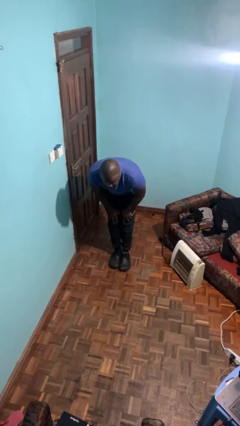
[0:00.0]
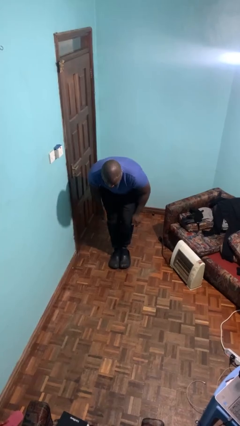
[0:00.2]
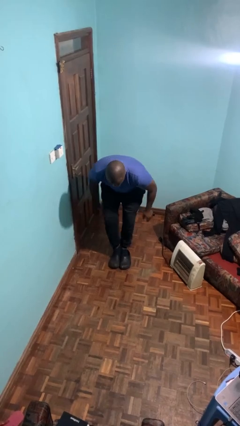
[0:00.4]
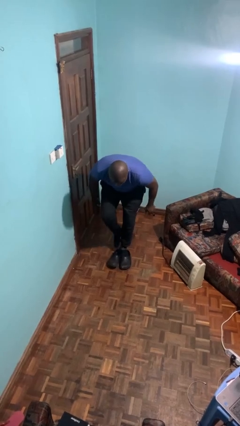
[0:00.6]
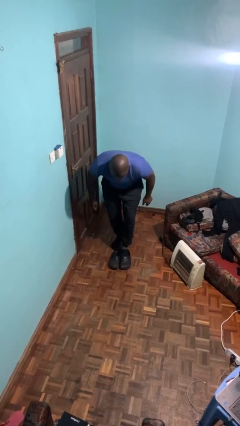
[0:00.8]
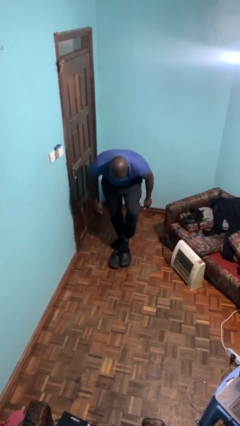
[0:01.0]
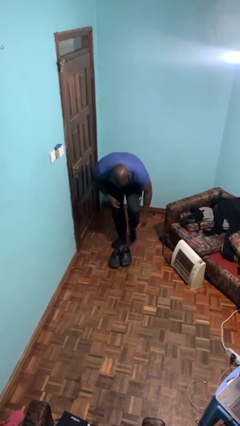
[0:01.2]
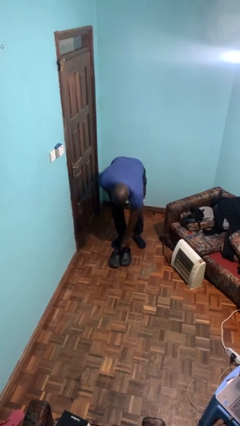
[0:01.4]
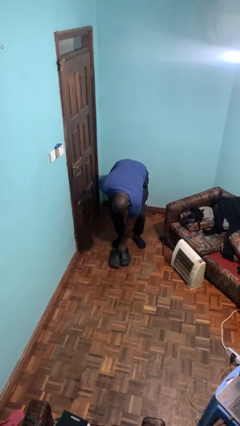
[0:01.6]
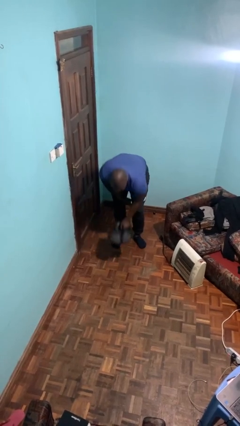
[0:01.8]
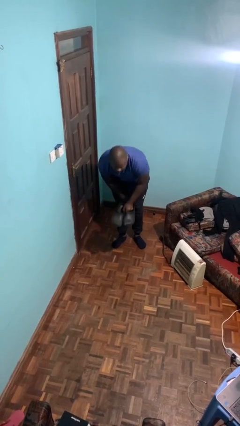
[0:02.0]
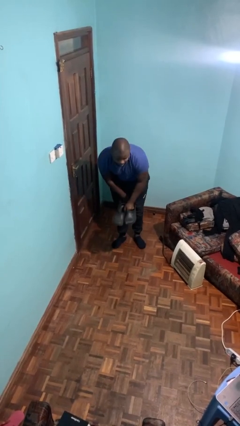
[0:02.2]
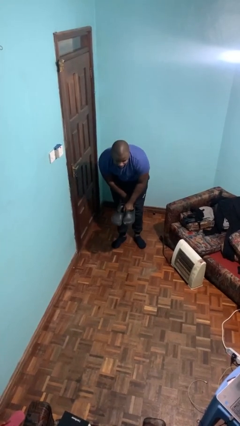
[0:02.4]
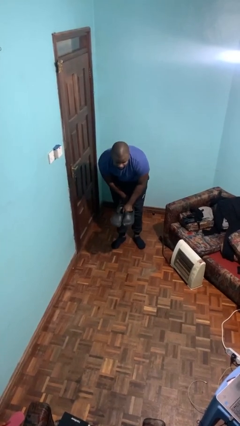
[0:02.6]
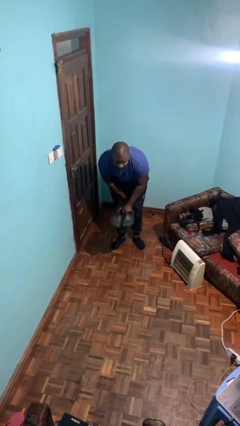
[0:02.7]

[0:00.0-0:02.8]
person takes off shoes

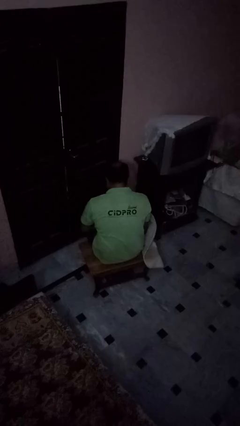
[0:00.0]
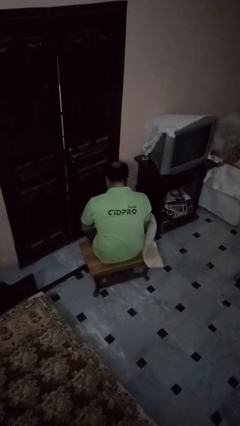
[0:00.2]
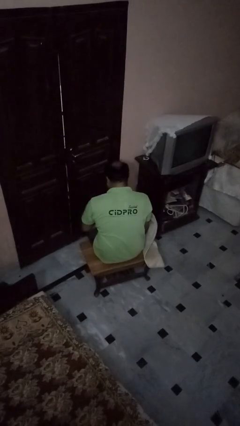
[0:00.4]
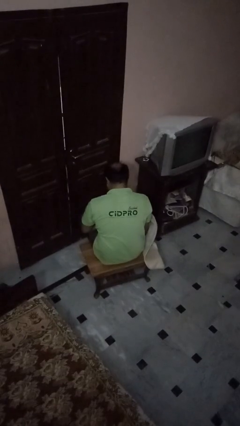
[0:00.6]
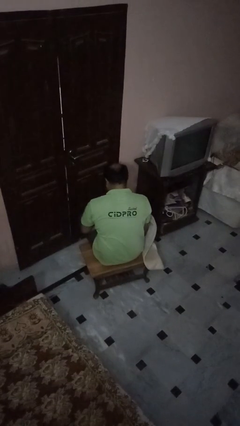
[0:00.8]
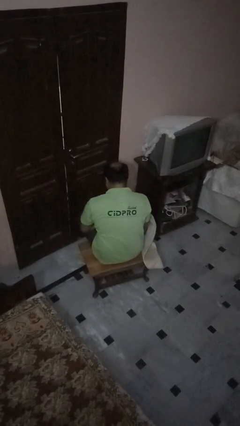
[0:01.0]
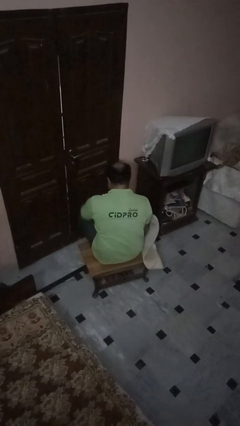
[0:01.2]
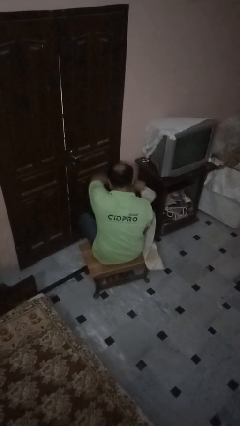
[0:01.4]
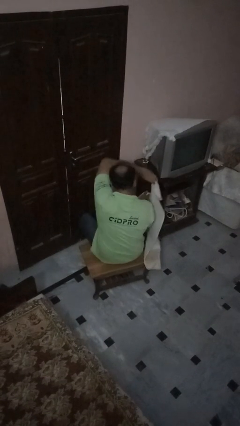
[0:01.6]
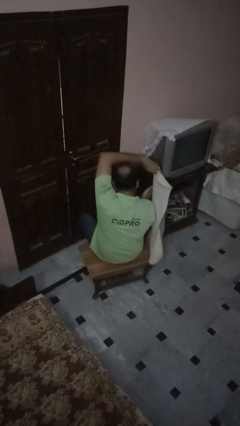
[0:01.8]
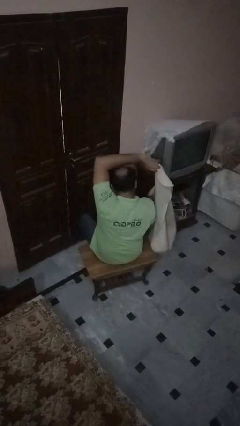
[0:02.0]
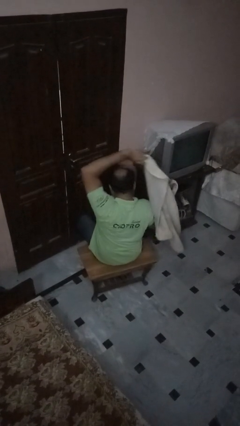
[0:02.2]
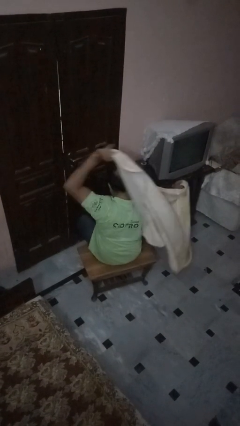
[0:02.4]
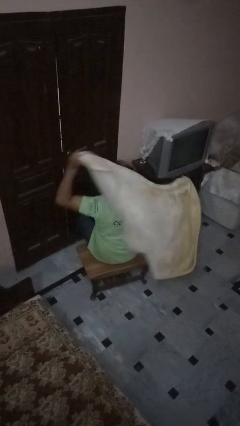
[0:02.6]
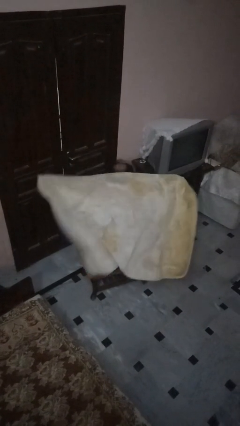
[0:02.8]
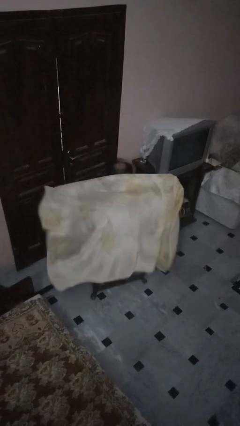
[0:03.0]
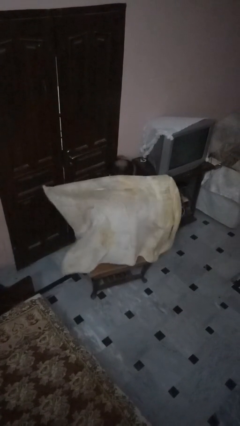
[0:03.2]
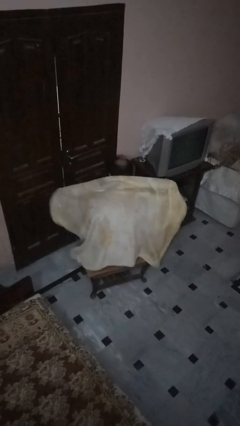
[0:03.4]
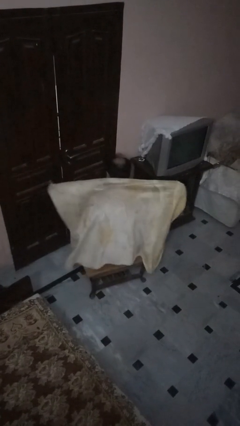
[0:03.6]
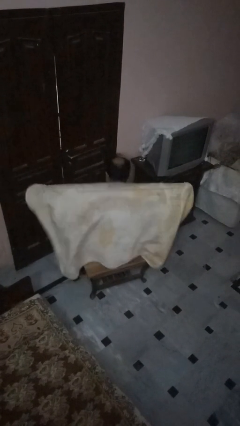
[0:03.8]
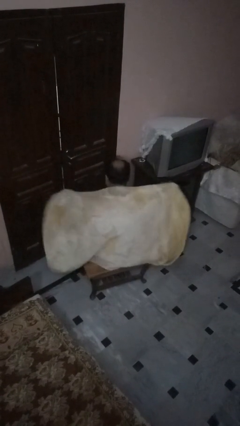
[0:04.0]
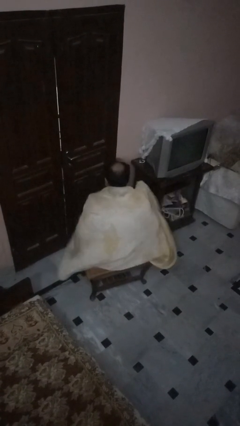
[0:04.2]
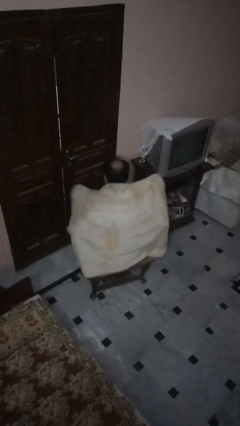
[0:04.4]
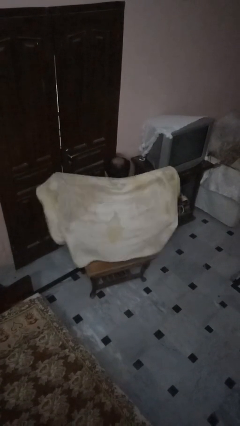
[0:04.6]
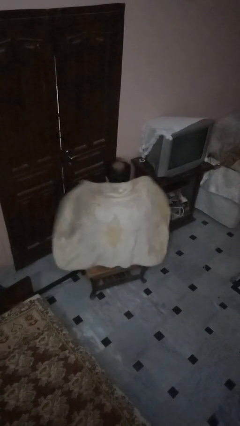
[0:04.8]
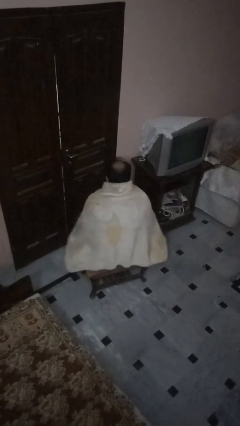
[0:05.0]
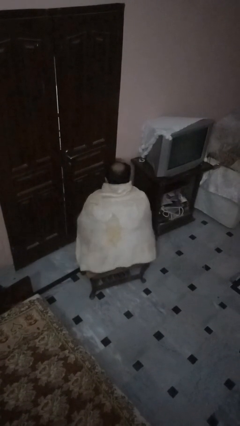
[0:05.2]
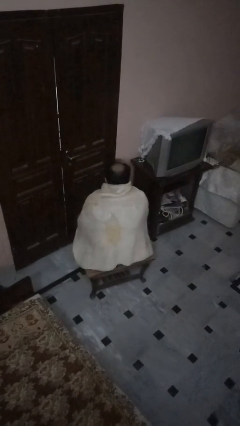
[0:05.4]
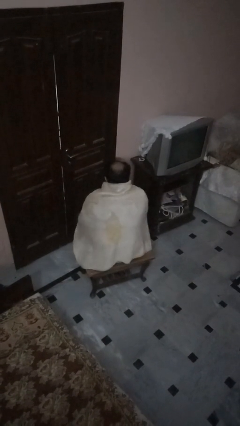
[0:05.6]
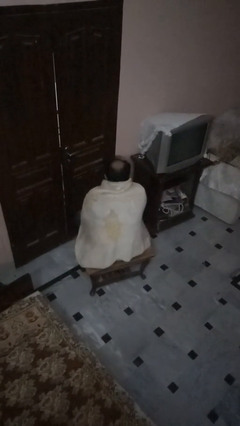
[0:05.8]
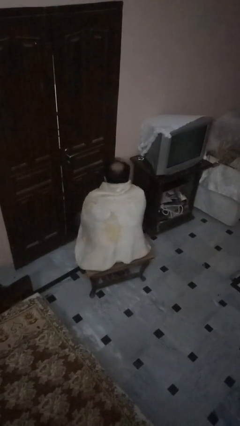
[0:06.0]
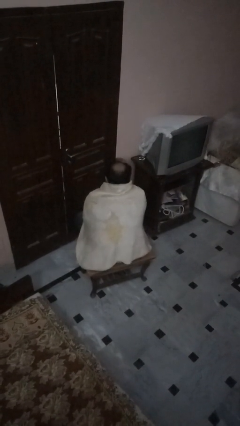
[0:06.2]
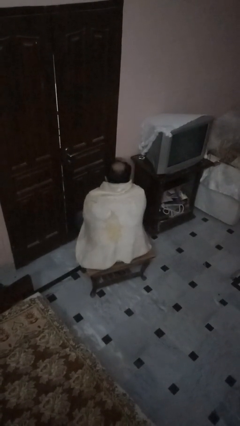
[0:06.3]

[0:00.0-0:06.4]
person covers with blanket

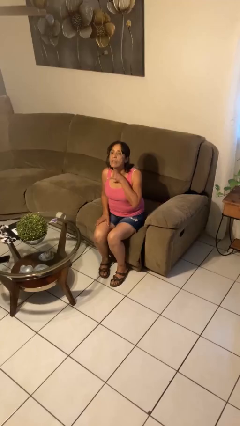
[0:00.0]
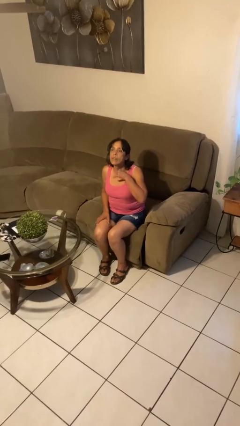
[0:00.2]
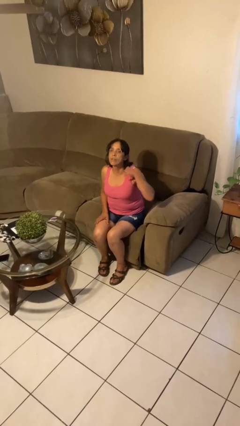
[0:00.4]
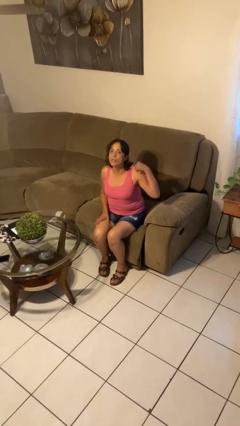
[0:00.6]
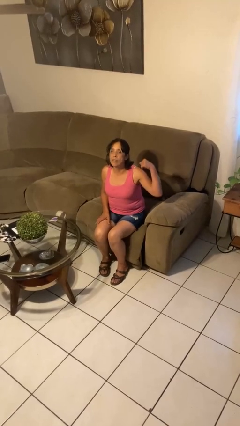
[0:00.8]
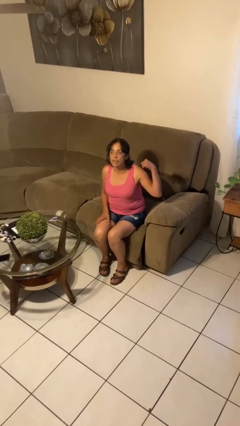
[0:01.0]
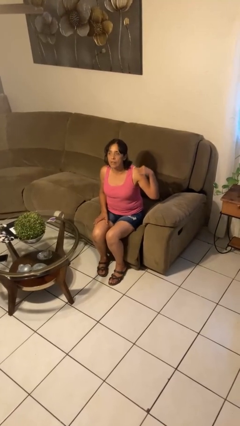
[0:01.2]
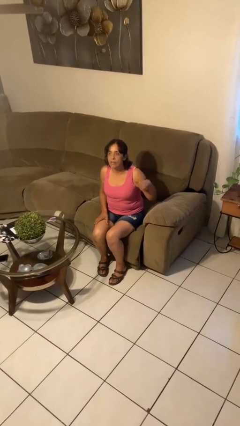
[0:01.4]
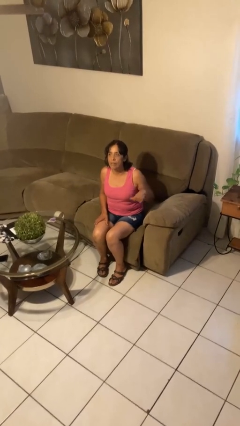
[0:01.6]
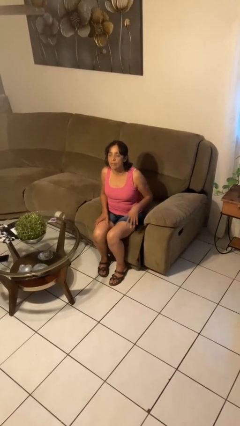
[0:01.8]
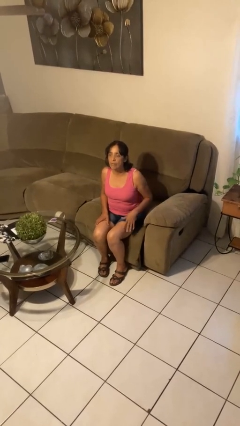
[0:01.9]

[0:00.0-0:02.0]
person gestures cut

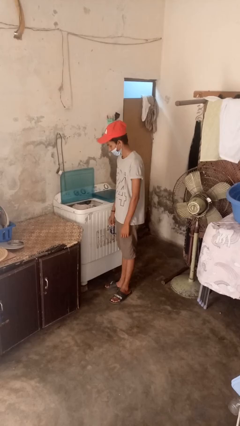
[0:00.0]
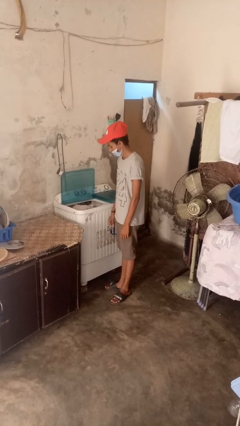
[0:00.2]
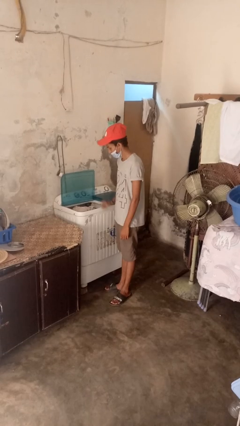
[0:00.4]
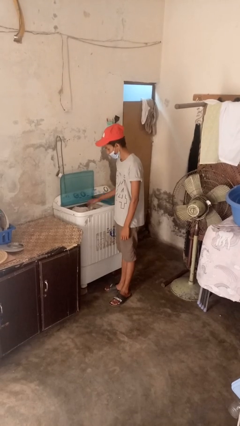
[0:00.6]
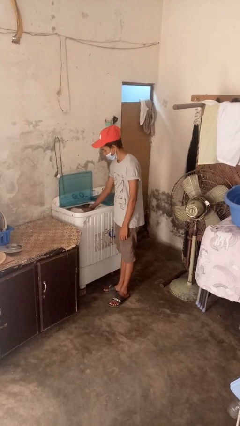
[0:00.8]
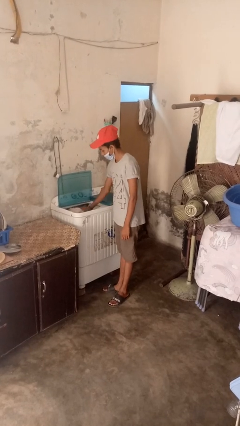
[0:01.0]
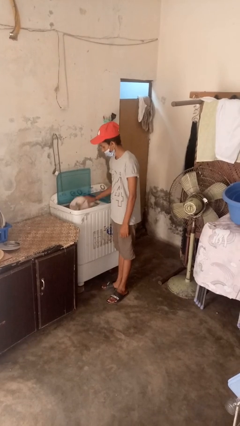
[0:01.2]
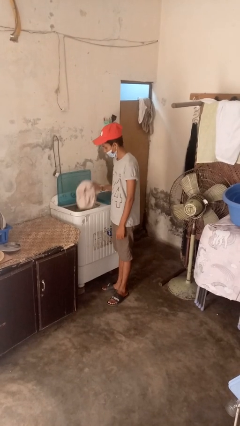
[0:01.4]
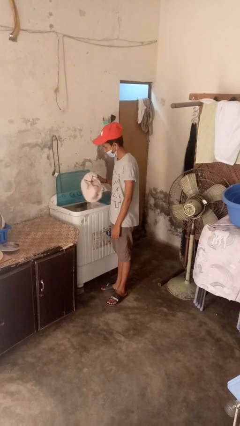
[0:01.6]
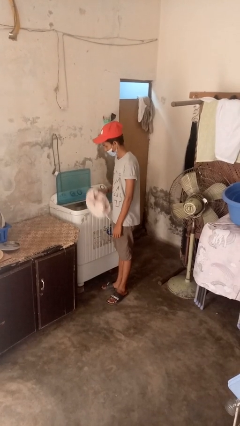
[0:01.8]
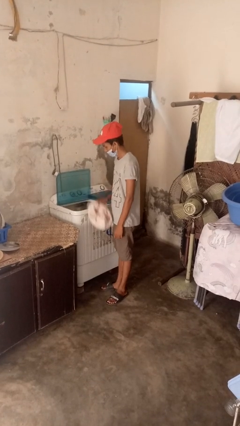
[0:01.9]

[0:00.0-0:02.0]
person unloads dryer

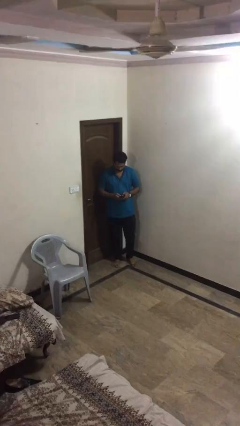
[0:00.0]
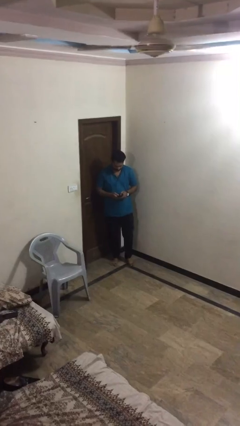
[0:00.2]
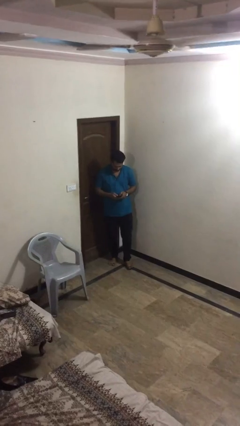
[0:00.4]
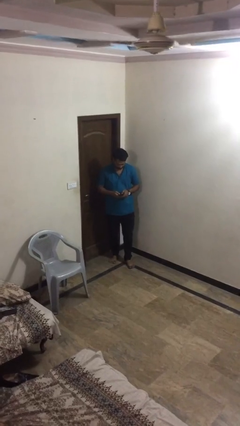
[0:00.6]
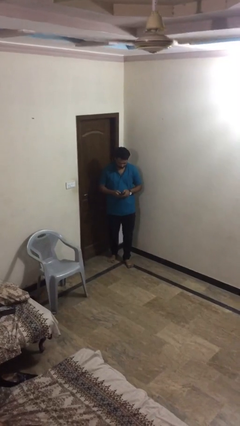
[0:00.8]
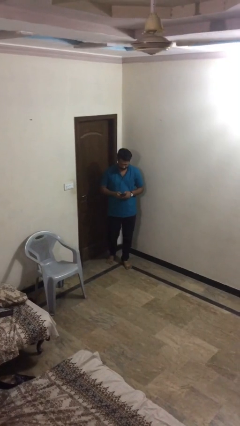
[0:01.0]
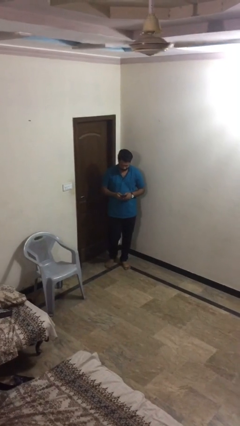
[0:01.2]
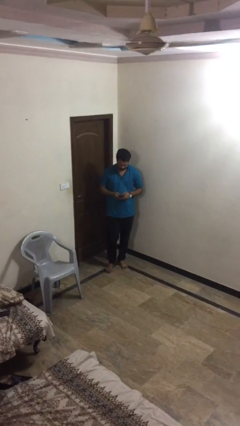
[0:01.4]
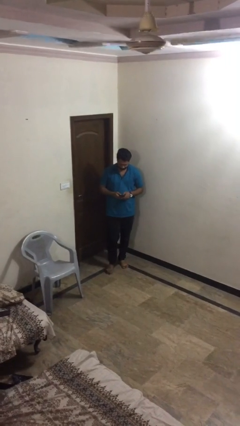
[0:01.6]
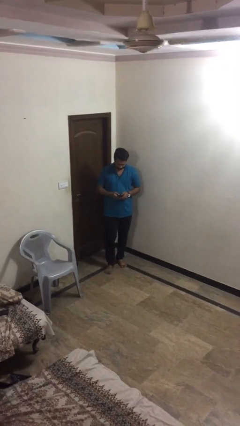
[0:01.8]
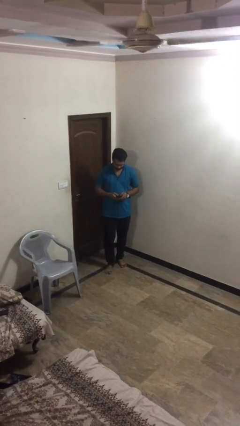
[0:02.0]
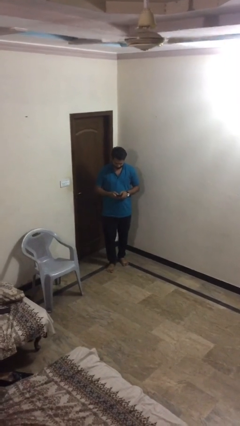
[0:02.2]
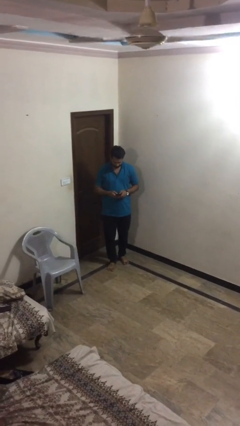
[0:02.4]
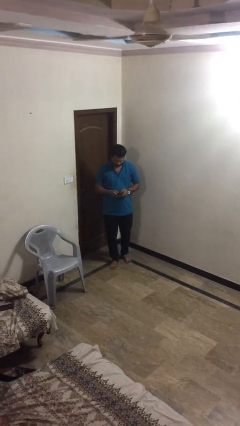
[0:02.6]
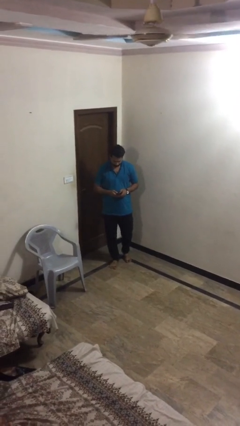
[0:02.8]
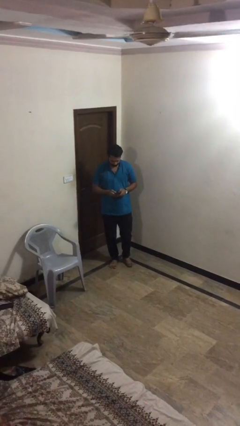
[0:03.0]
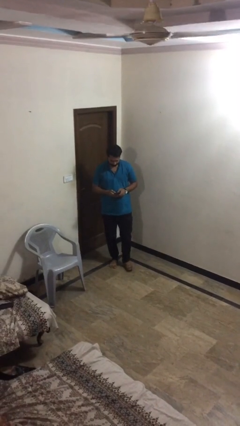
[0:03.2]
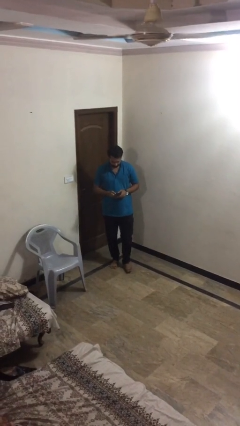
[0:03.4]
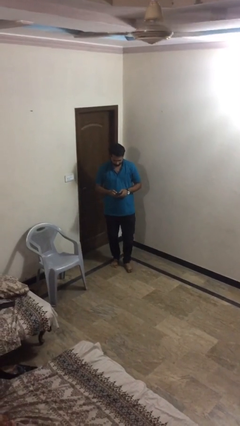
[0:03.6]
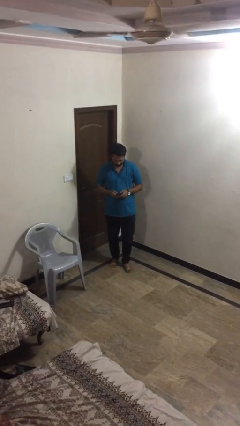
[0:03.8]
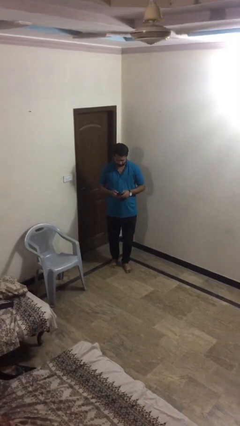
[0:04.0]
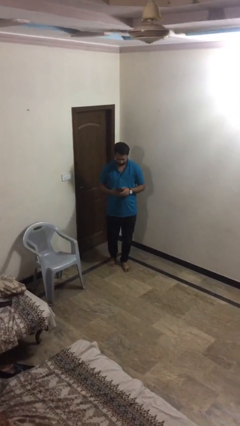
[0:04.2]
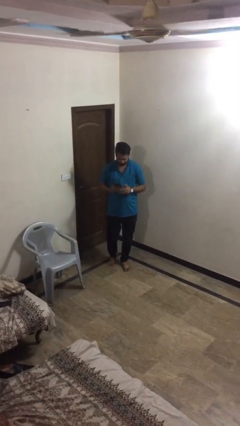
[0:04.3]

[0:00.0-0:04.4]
person texts on phone
